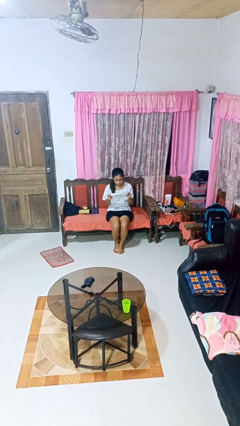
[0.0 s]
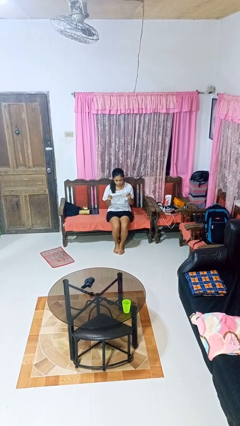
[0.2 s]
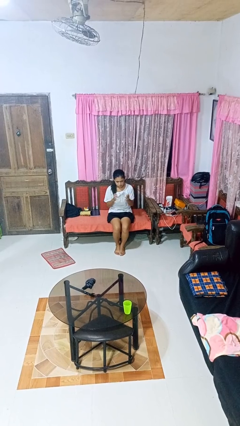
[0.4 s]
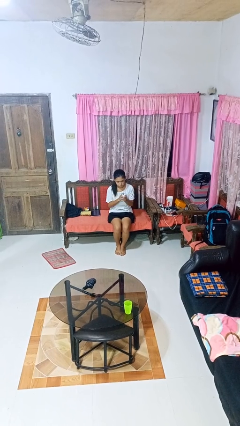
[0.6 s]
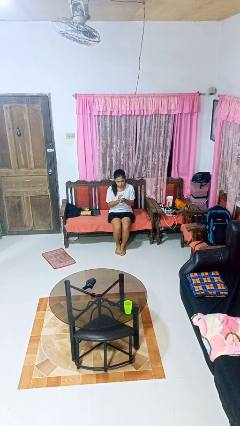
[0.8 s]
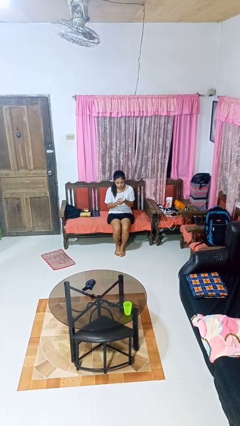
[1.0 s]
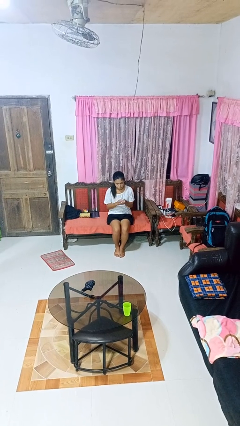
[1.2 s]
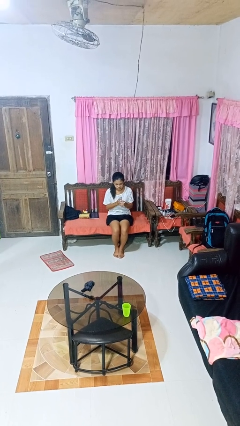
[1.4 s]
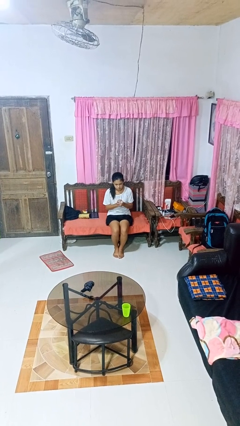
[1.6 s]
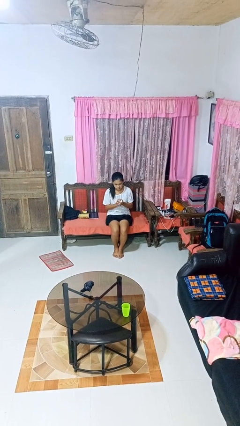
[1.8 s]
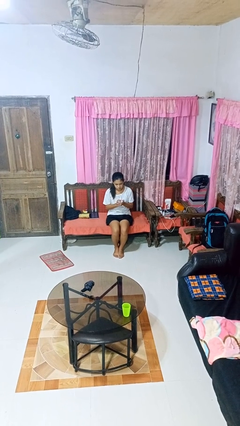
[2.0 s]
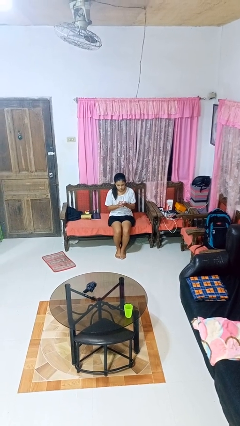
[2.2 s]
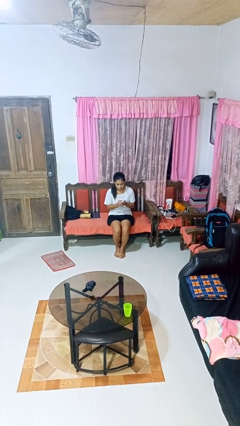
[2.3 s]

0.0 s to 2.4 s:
person crumples paper

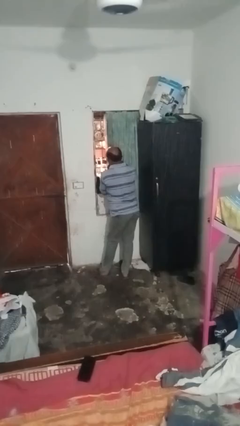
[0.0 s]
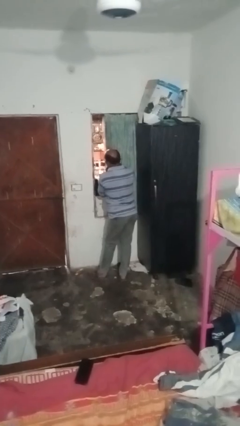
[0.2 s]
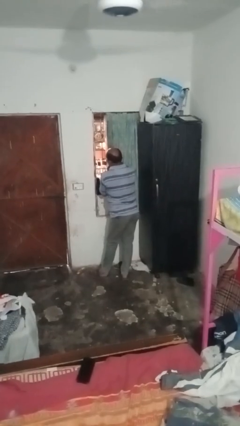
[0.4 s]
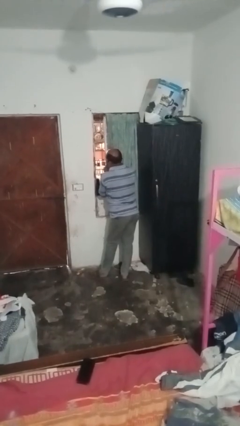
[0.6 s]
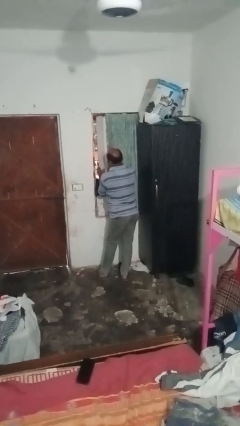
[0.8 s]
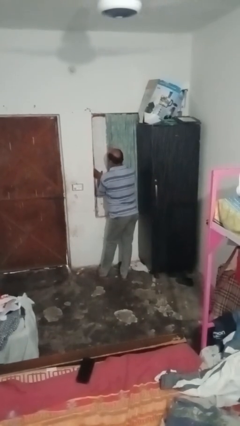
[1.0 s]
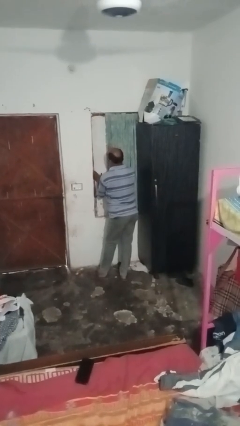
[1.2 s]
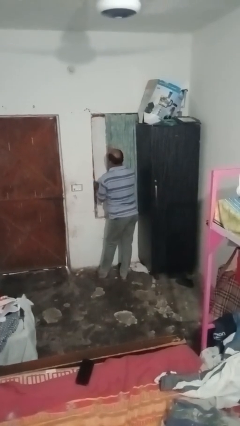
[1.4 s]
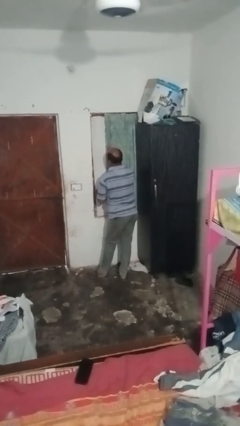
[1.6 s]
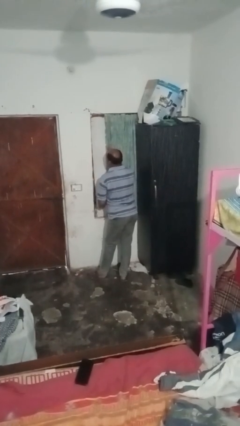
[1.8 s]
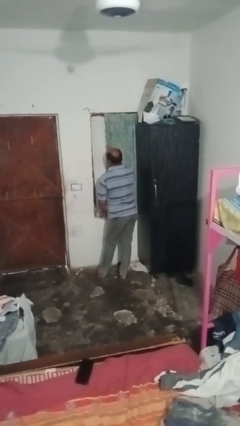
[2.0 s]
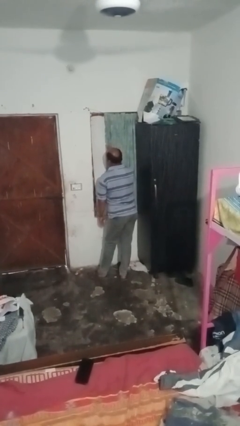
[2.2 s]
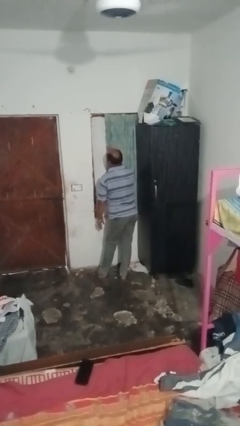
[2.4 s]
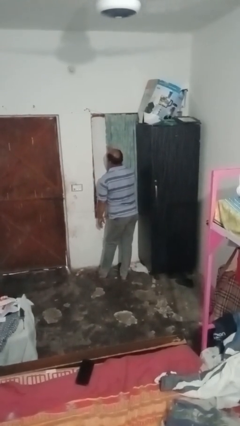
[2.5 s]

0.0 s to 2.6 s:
person closes home window

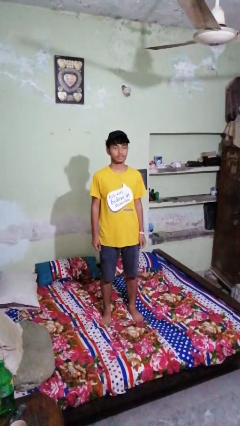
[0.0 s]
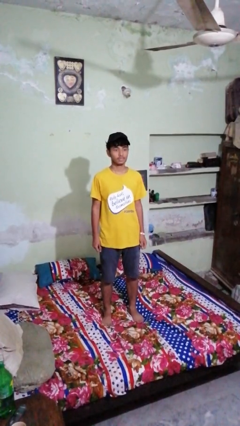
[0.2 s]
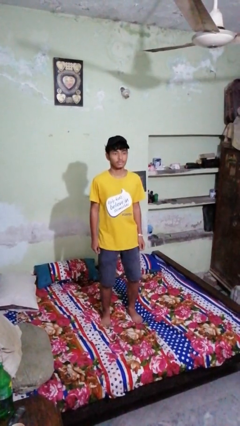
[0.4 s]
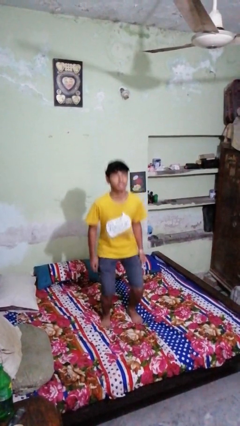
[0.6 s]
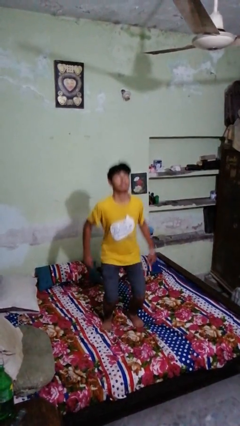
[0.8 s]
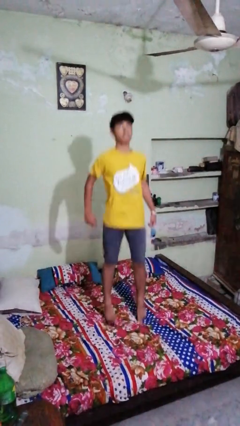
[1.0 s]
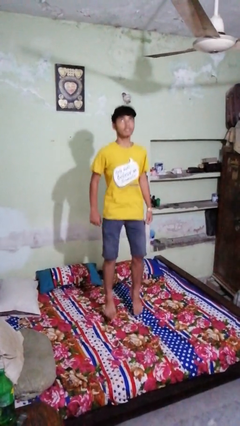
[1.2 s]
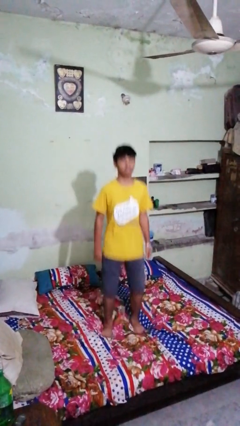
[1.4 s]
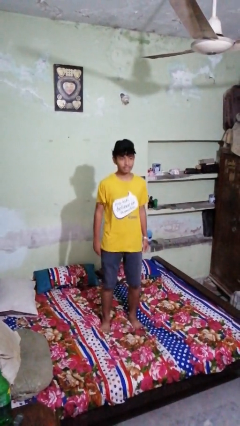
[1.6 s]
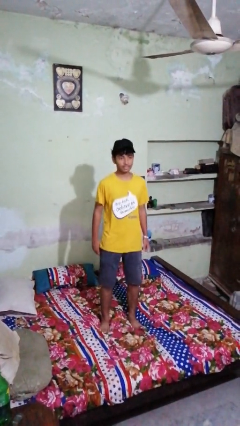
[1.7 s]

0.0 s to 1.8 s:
person jumps on bed

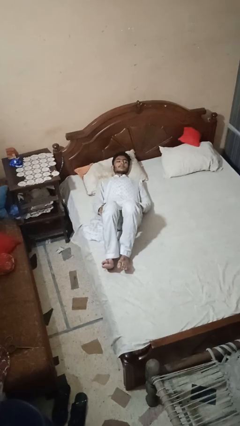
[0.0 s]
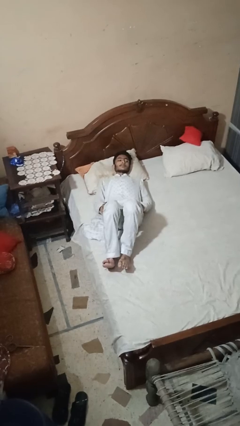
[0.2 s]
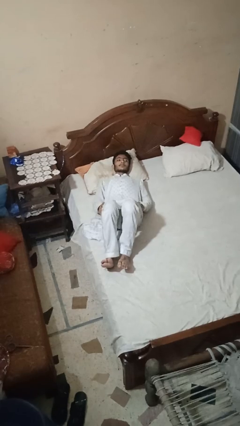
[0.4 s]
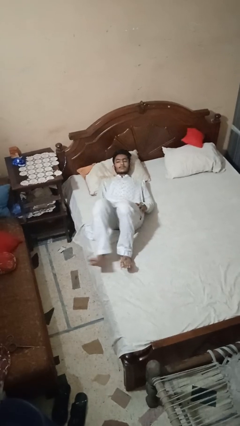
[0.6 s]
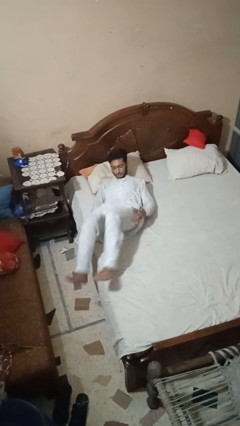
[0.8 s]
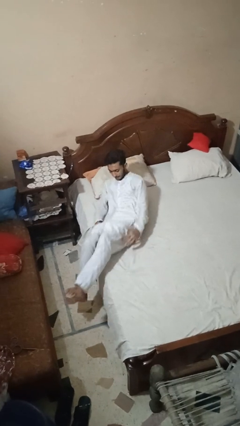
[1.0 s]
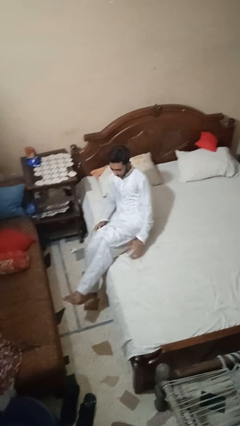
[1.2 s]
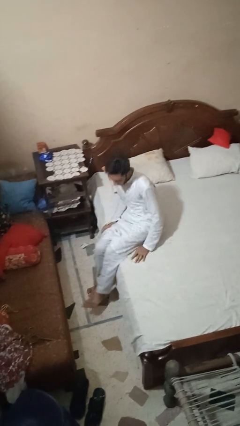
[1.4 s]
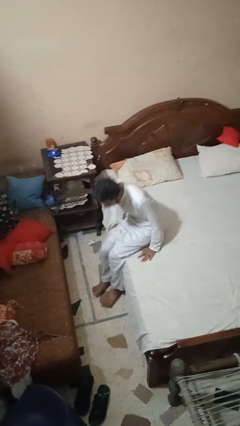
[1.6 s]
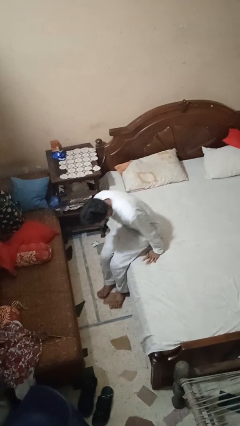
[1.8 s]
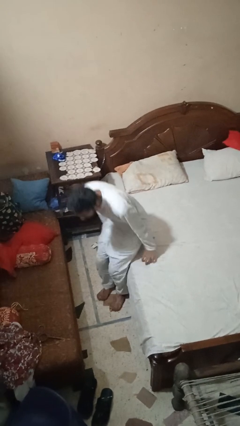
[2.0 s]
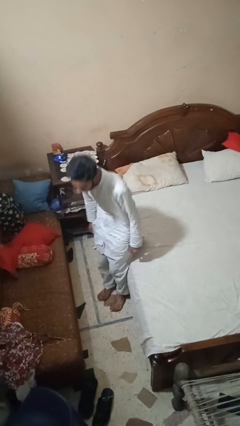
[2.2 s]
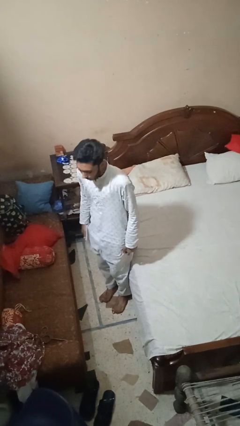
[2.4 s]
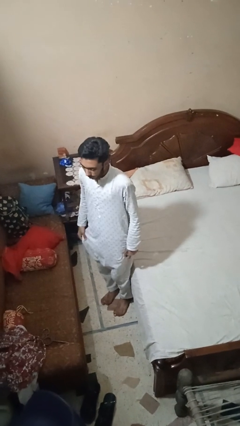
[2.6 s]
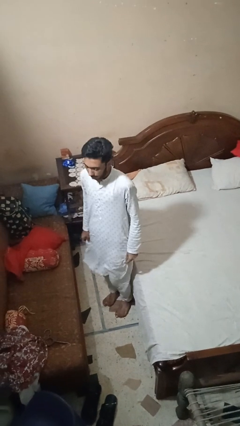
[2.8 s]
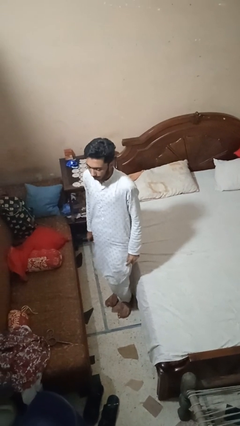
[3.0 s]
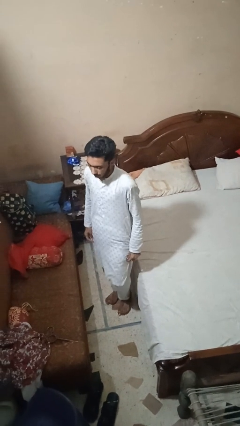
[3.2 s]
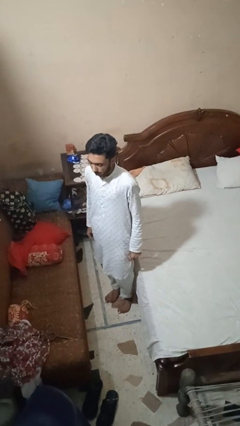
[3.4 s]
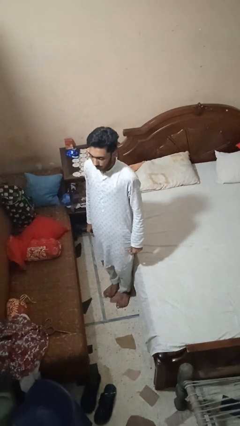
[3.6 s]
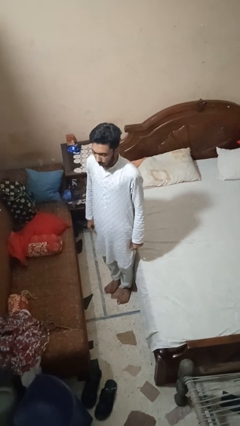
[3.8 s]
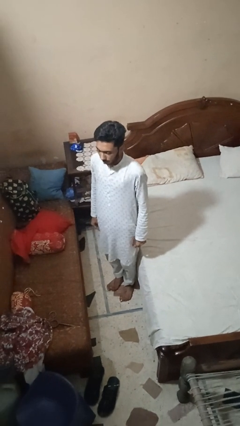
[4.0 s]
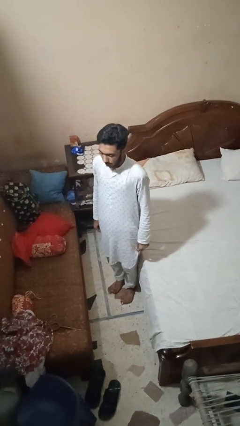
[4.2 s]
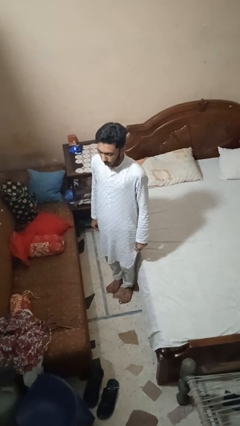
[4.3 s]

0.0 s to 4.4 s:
person stands up

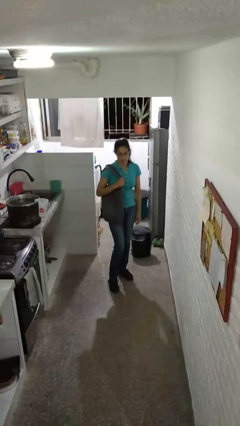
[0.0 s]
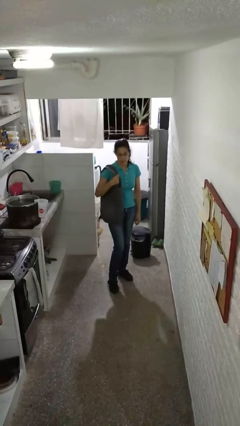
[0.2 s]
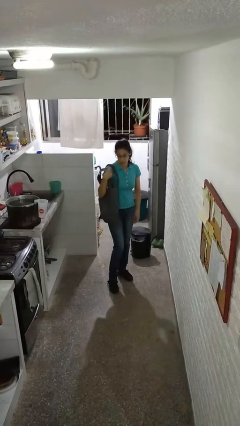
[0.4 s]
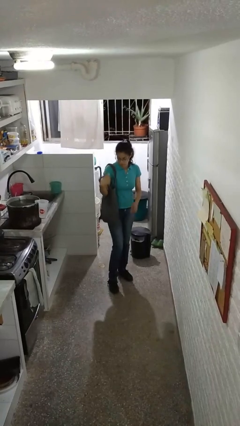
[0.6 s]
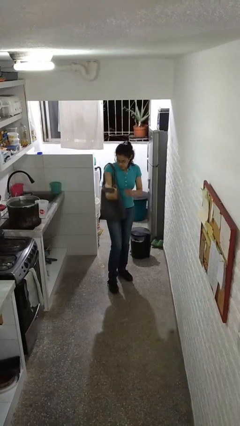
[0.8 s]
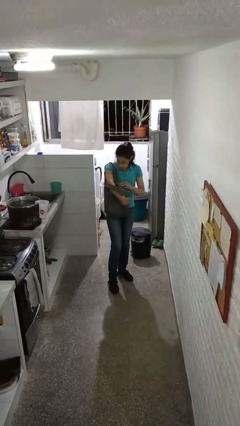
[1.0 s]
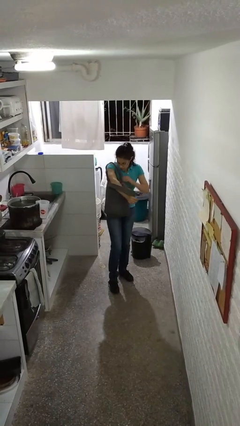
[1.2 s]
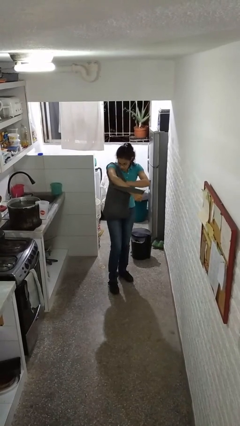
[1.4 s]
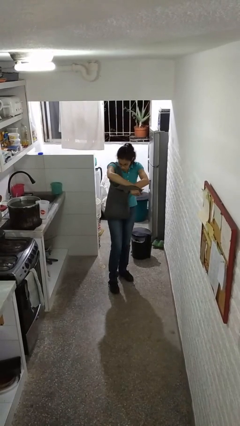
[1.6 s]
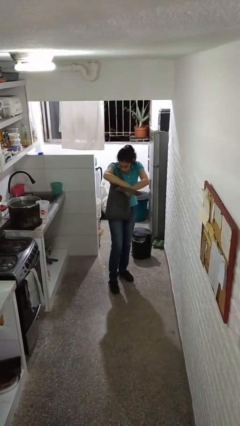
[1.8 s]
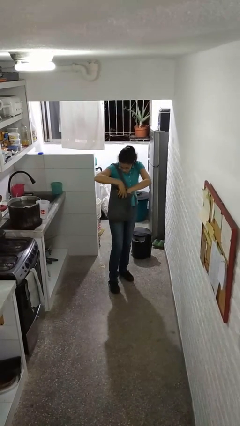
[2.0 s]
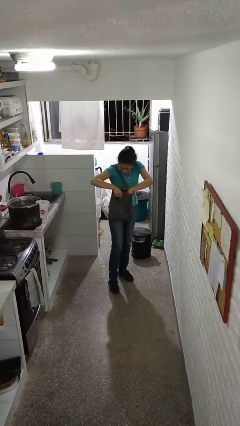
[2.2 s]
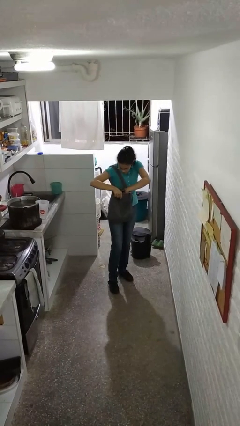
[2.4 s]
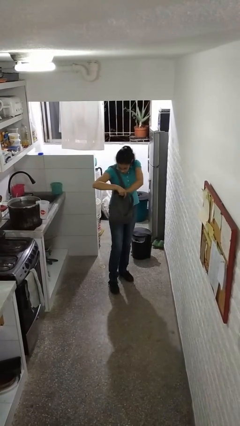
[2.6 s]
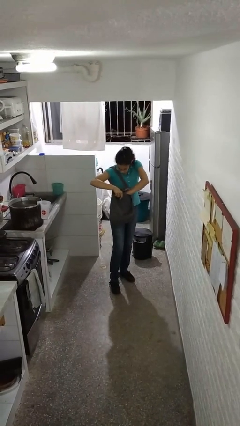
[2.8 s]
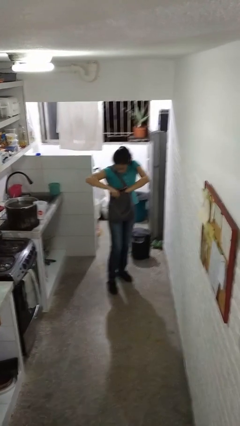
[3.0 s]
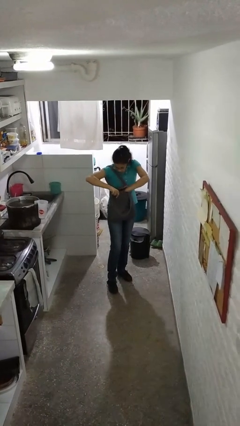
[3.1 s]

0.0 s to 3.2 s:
person searches in purse

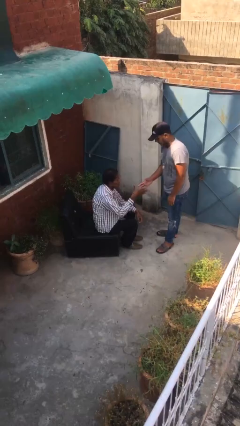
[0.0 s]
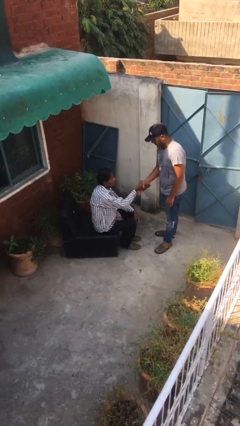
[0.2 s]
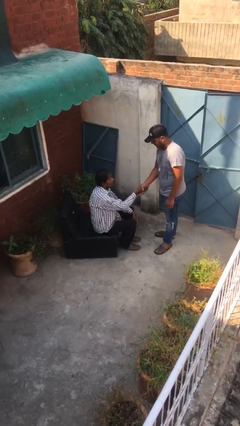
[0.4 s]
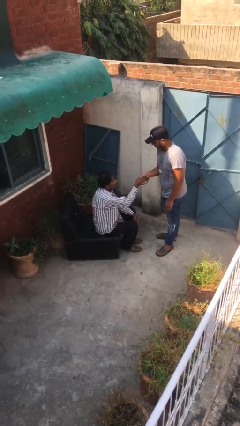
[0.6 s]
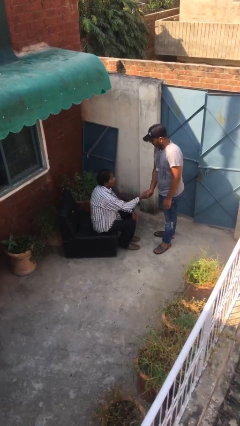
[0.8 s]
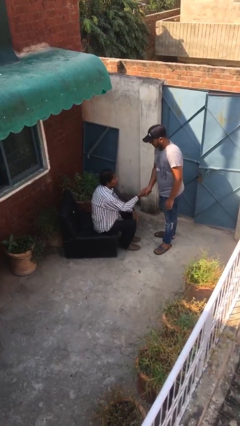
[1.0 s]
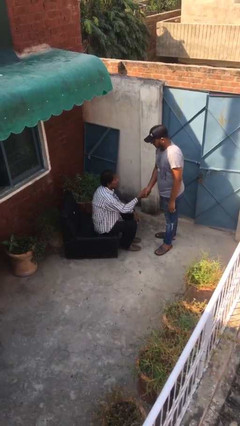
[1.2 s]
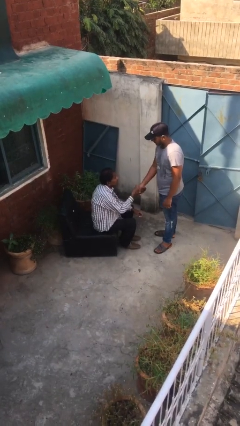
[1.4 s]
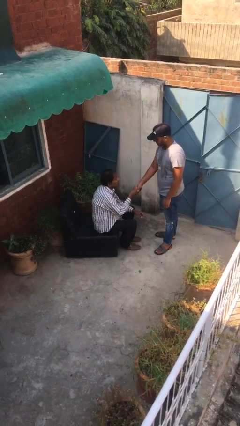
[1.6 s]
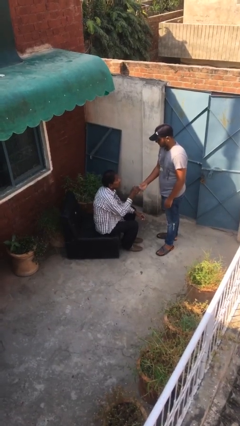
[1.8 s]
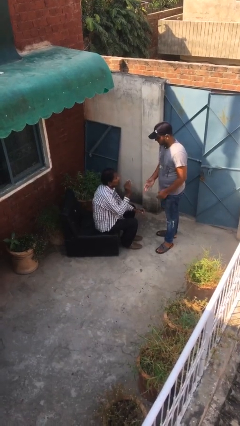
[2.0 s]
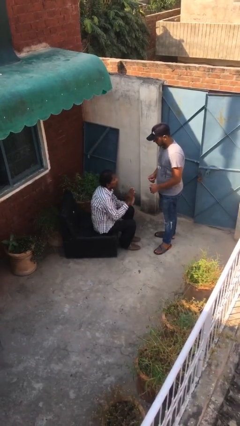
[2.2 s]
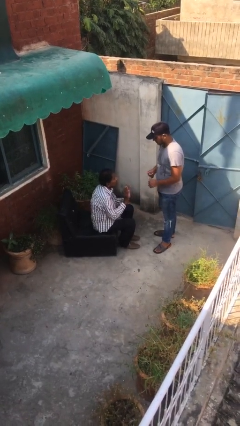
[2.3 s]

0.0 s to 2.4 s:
person shakes hand

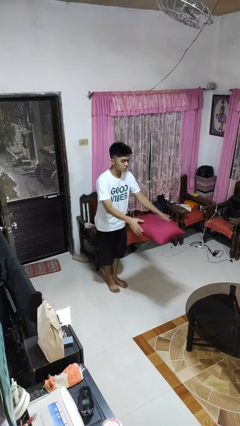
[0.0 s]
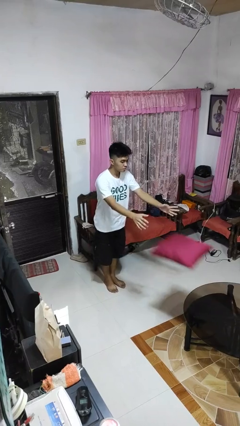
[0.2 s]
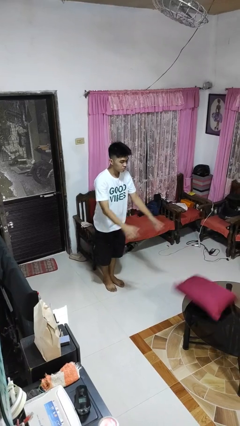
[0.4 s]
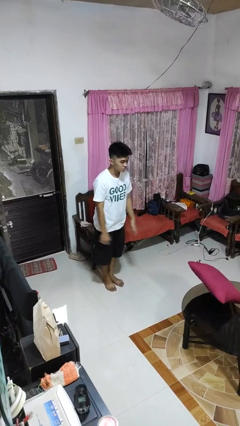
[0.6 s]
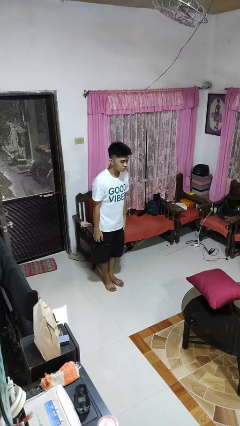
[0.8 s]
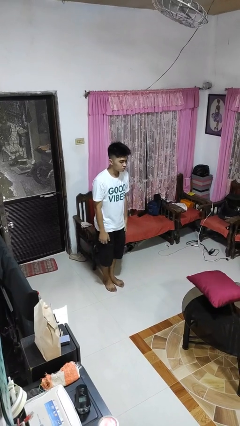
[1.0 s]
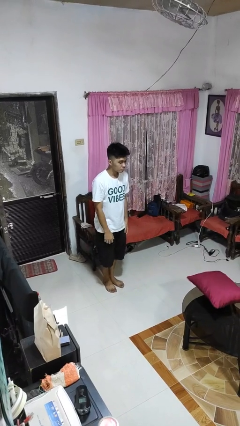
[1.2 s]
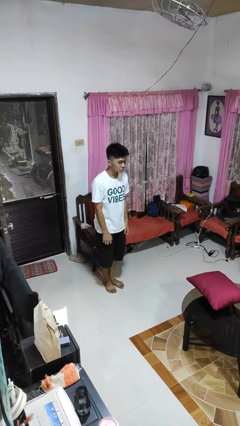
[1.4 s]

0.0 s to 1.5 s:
person throws object on table
